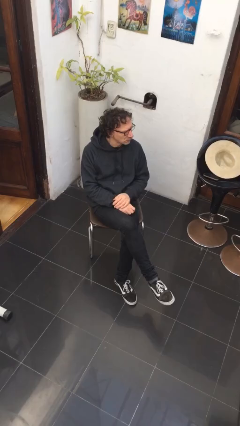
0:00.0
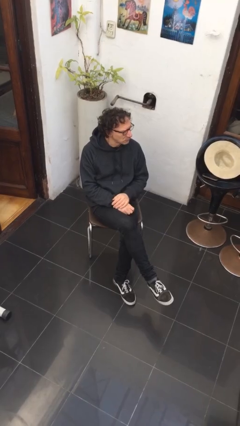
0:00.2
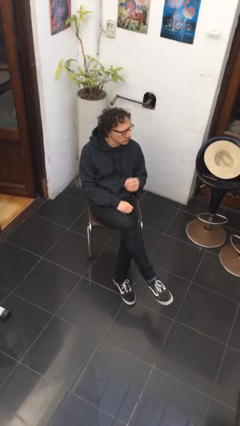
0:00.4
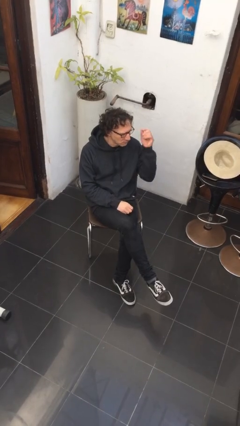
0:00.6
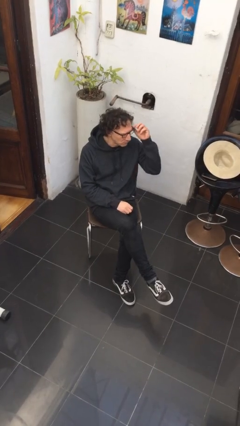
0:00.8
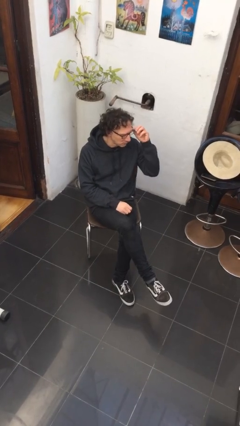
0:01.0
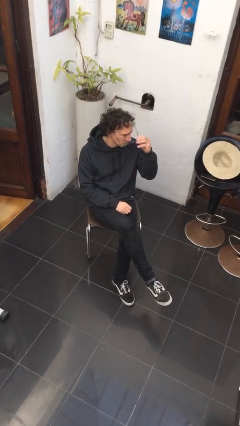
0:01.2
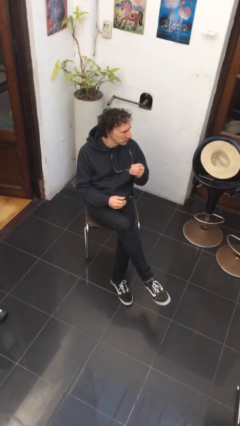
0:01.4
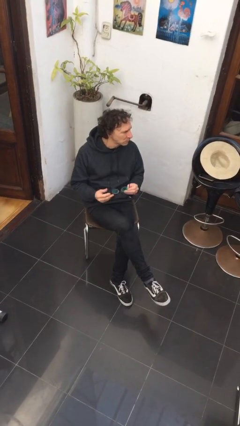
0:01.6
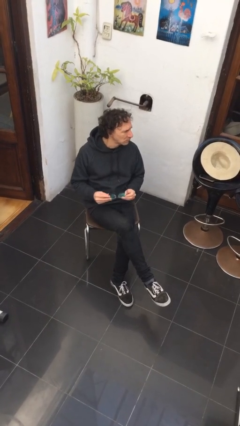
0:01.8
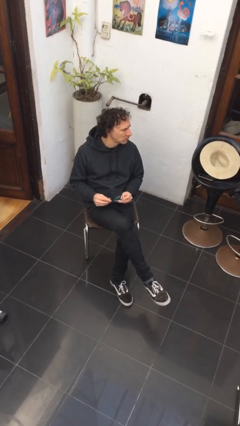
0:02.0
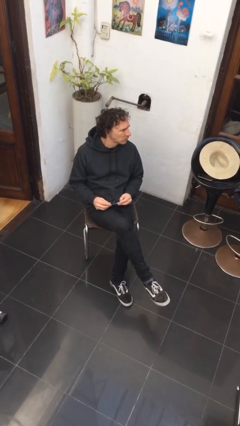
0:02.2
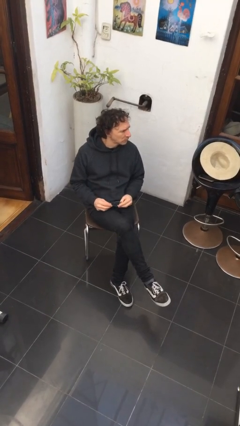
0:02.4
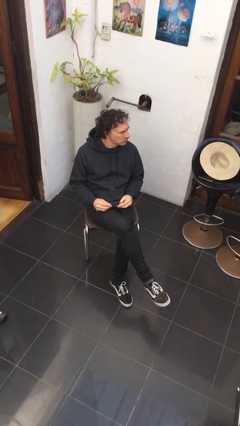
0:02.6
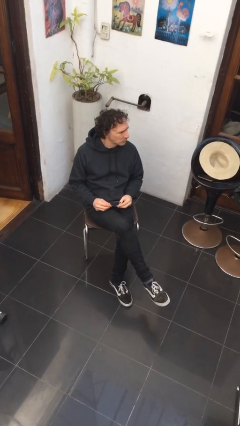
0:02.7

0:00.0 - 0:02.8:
person takes off glasses

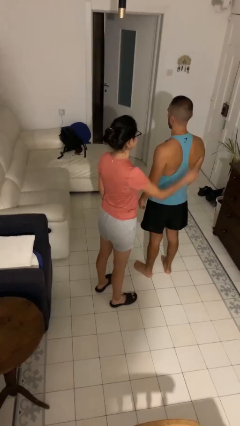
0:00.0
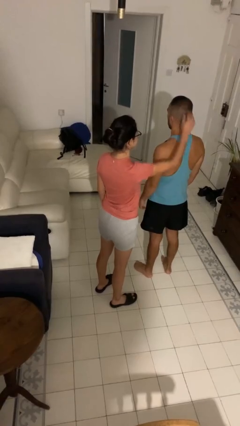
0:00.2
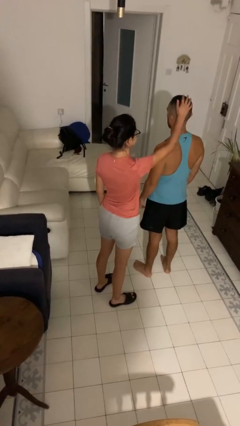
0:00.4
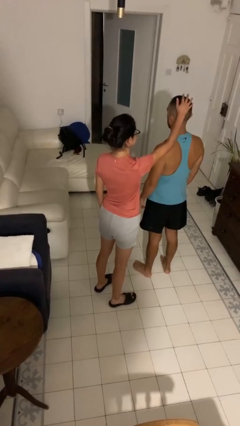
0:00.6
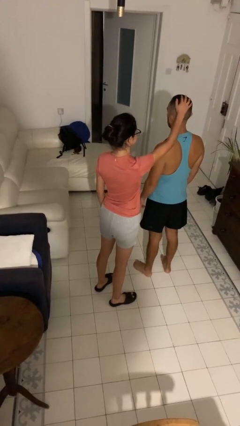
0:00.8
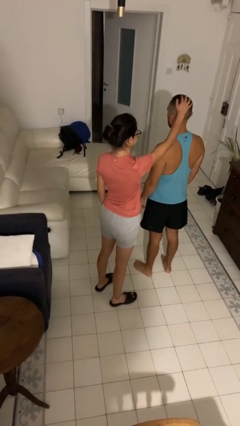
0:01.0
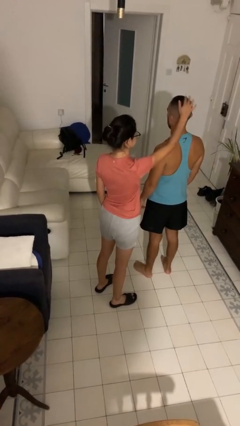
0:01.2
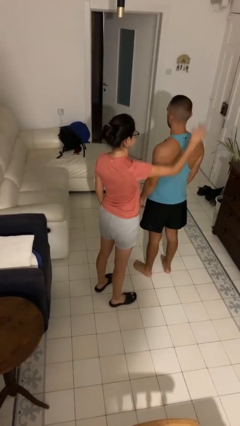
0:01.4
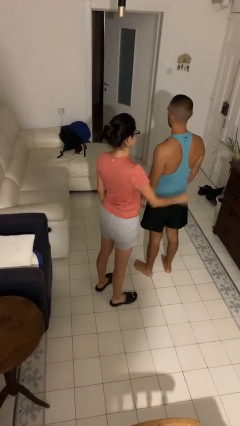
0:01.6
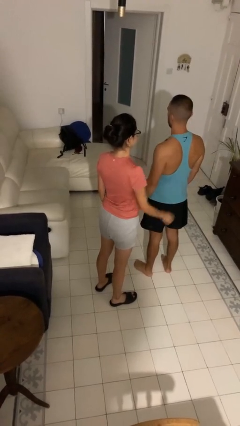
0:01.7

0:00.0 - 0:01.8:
person grabs person by hair

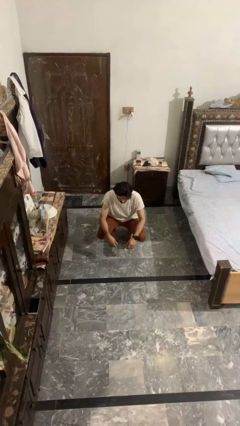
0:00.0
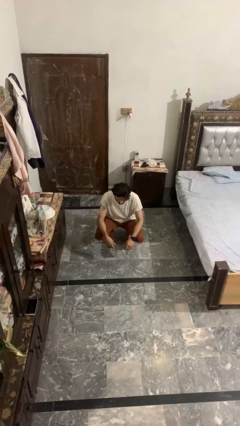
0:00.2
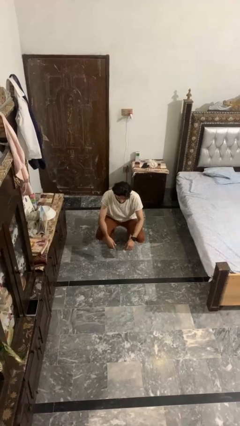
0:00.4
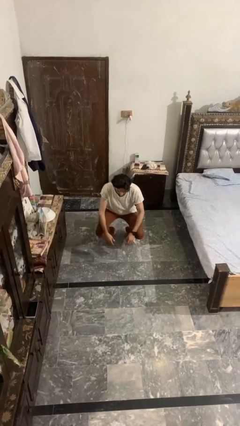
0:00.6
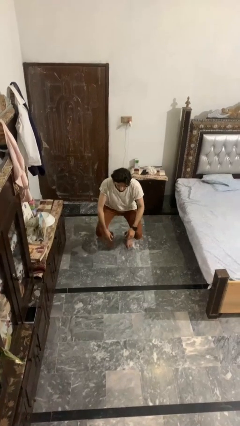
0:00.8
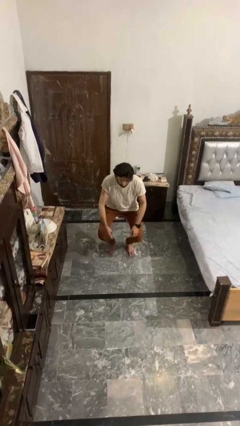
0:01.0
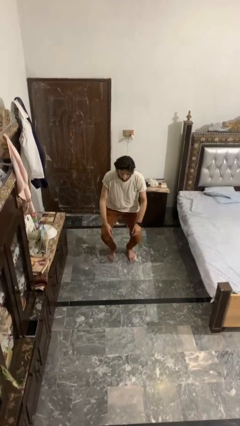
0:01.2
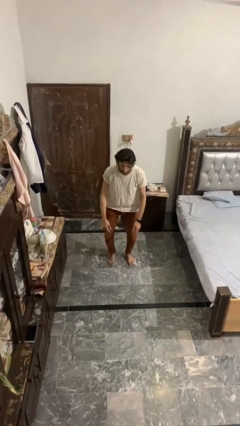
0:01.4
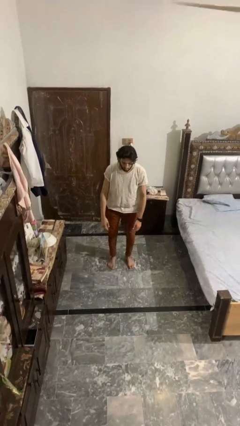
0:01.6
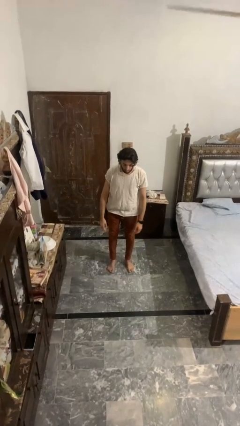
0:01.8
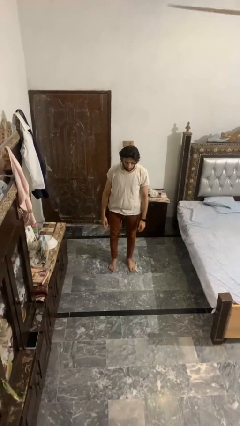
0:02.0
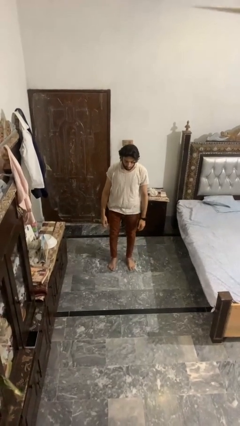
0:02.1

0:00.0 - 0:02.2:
person stands up

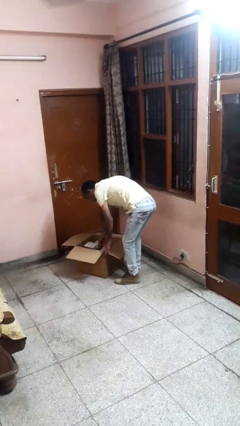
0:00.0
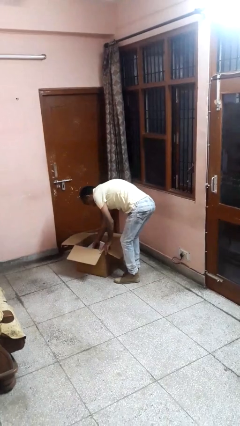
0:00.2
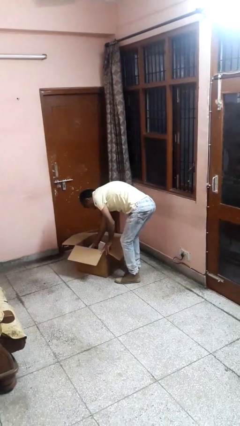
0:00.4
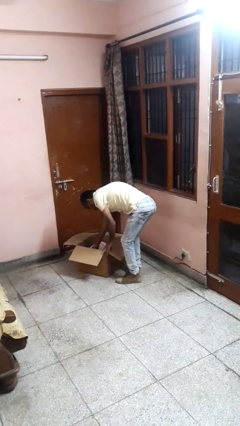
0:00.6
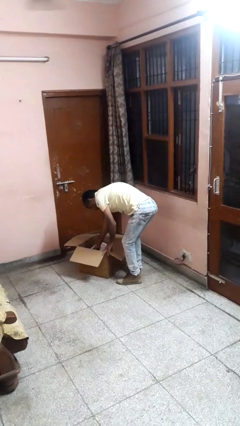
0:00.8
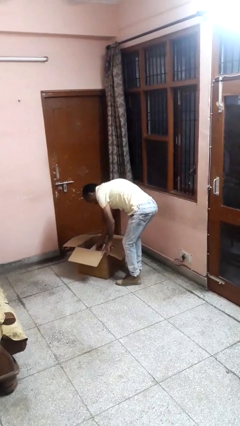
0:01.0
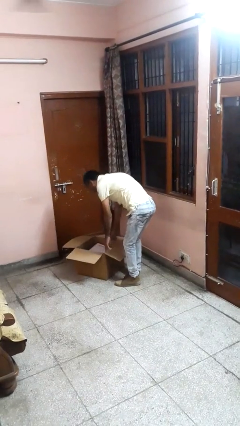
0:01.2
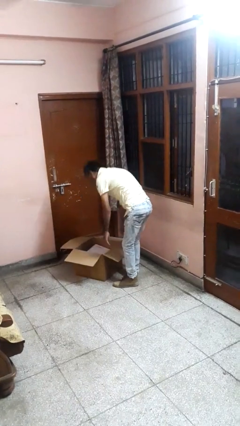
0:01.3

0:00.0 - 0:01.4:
person puts object into box

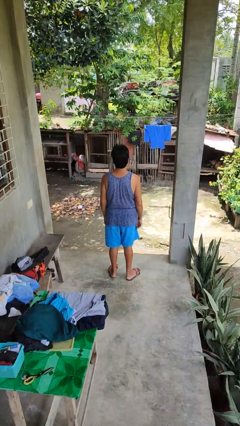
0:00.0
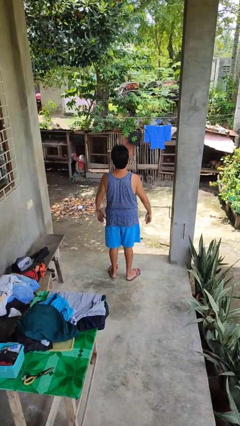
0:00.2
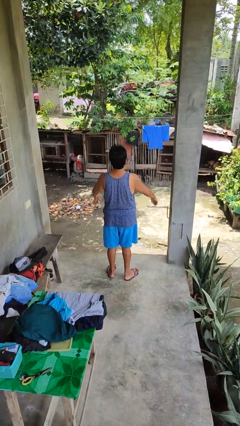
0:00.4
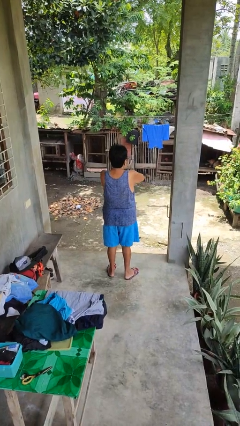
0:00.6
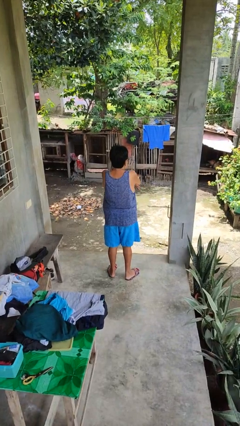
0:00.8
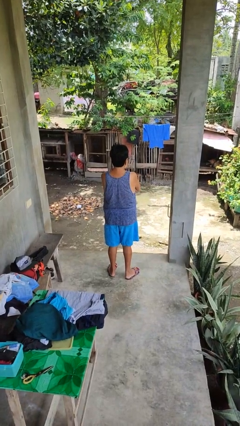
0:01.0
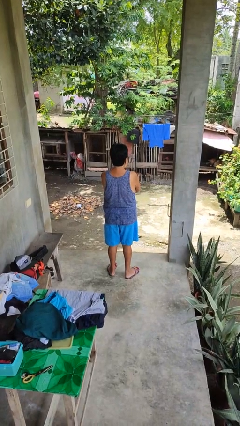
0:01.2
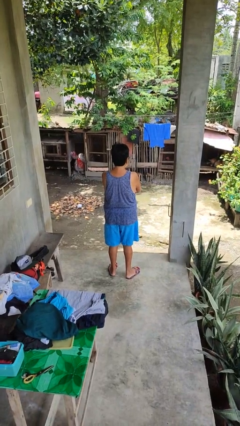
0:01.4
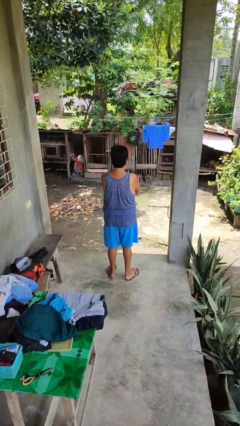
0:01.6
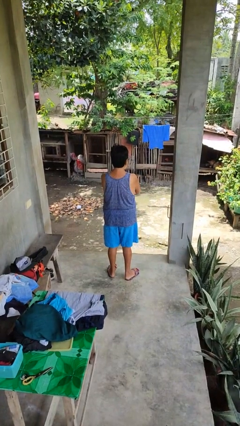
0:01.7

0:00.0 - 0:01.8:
person crosses arms

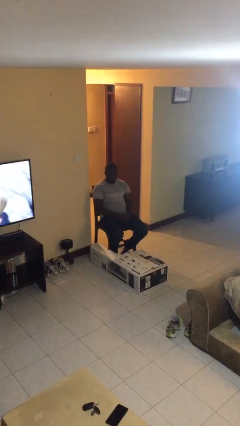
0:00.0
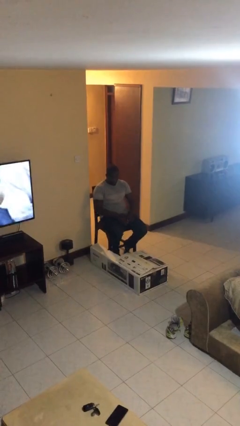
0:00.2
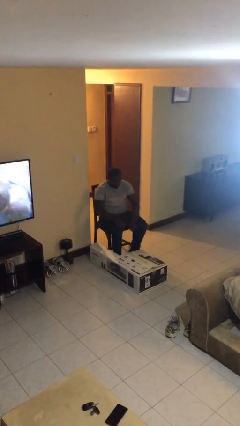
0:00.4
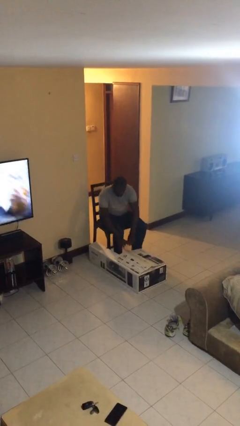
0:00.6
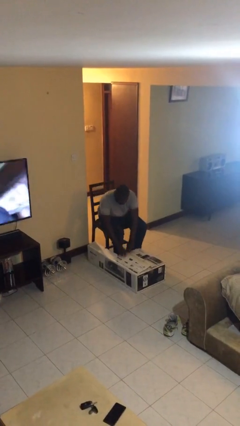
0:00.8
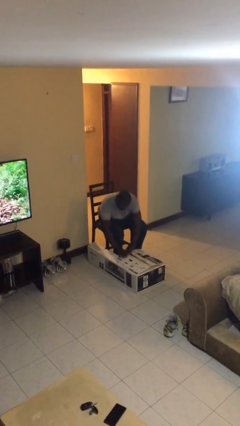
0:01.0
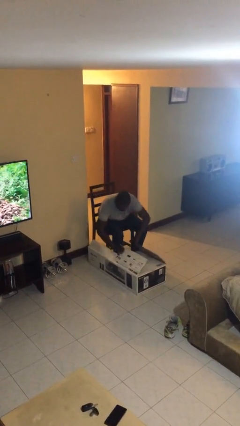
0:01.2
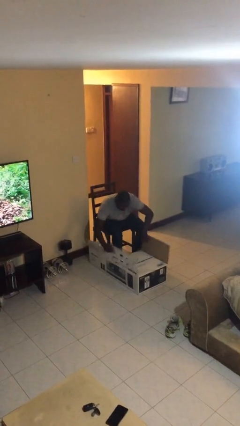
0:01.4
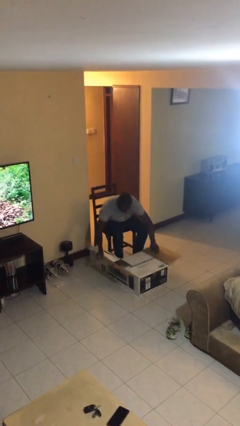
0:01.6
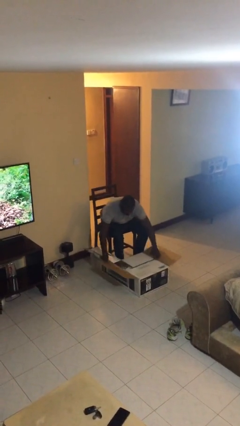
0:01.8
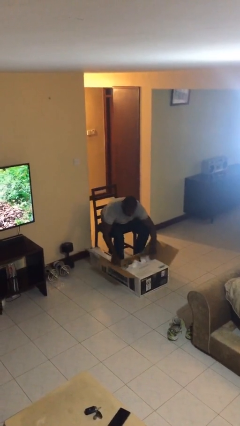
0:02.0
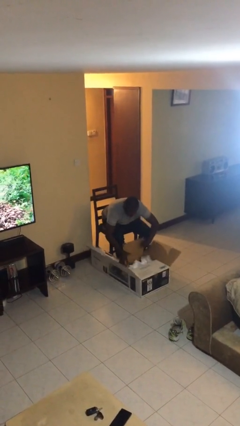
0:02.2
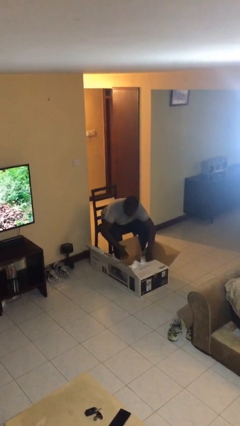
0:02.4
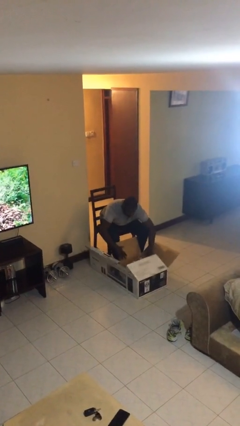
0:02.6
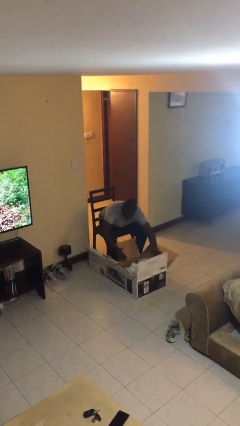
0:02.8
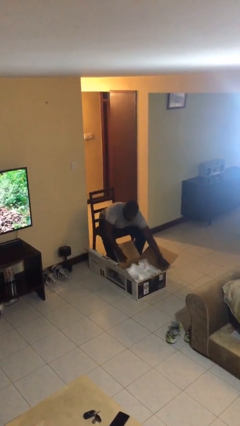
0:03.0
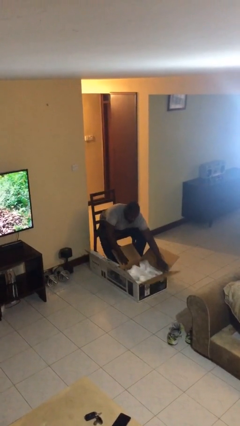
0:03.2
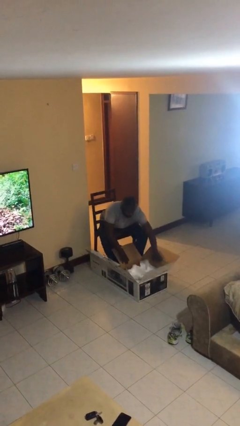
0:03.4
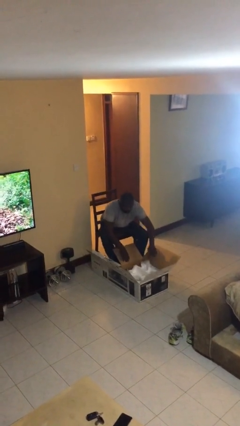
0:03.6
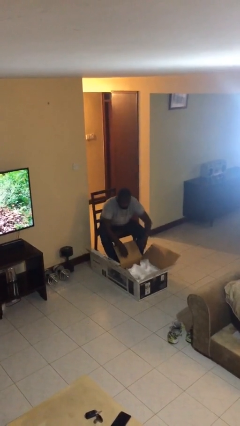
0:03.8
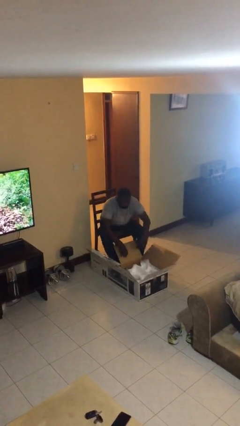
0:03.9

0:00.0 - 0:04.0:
person opens box

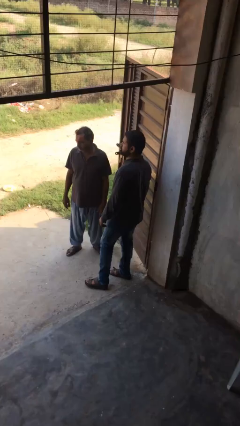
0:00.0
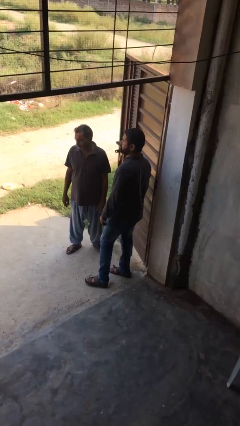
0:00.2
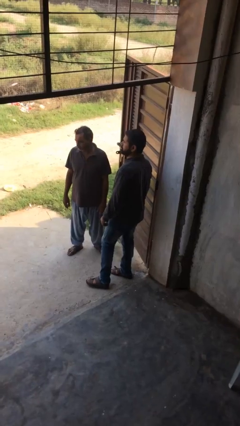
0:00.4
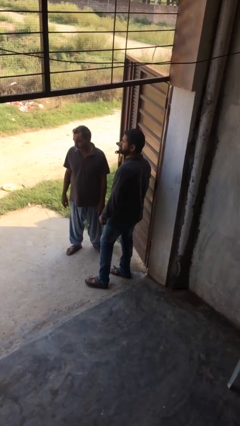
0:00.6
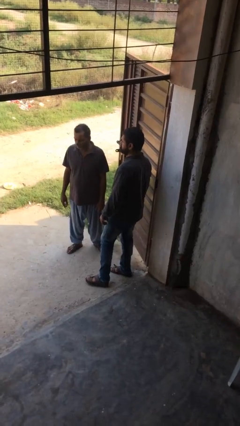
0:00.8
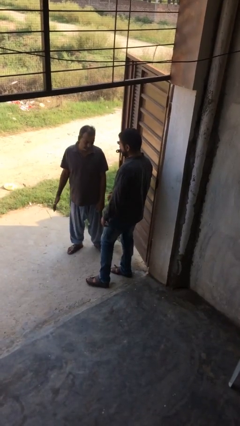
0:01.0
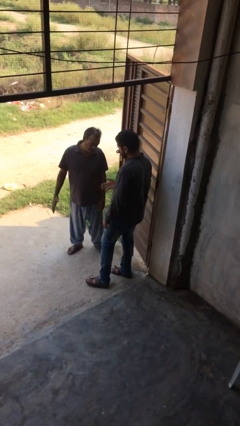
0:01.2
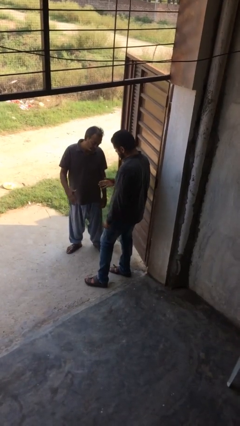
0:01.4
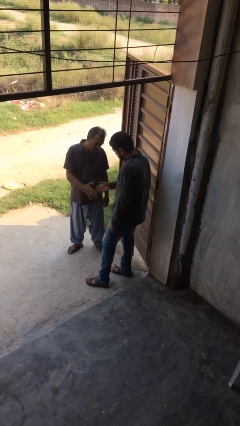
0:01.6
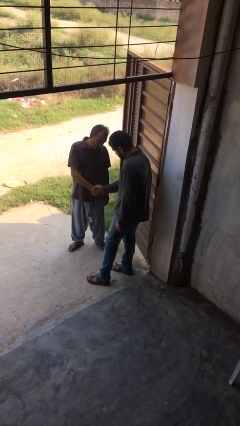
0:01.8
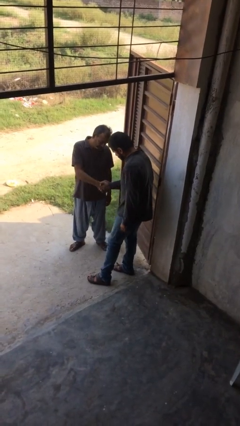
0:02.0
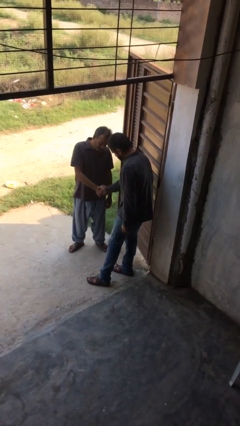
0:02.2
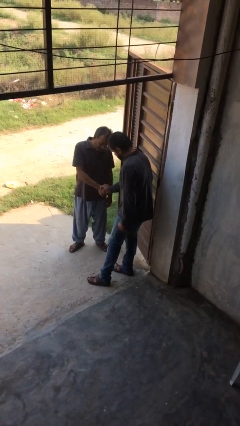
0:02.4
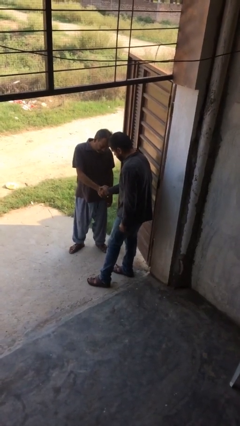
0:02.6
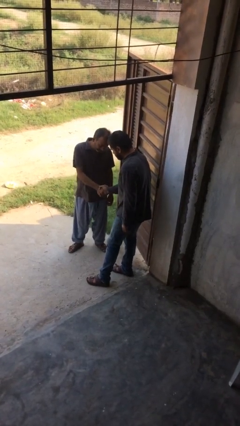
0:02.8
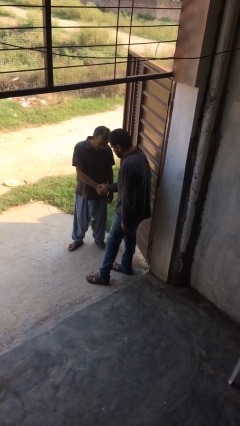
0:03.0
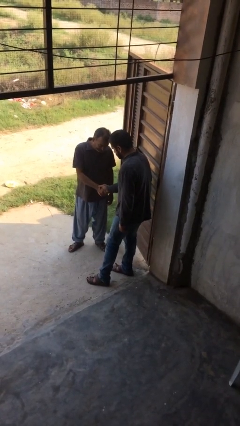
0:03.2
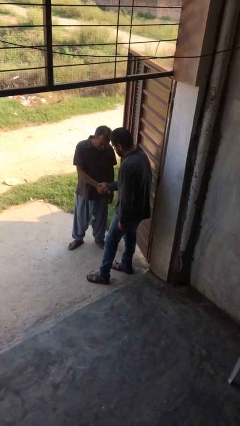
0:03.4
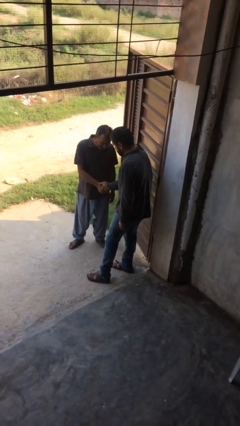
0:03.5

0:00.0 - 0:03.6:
person shakes hand
